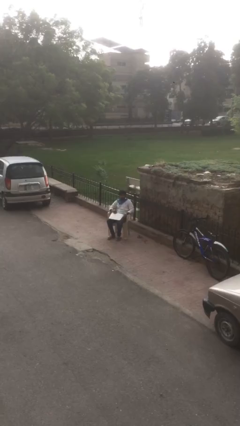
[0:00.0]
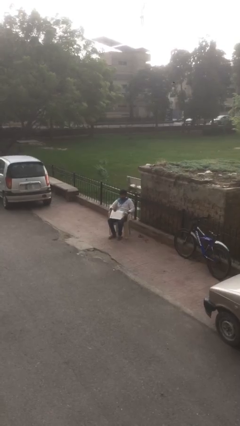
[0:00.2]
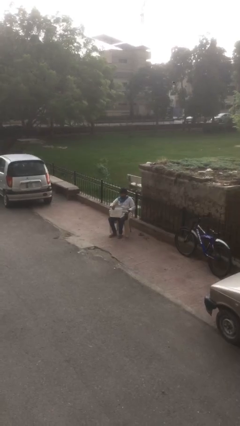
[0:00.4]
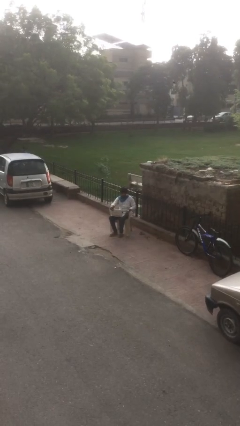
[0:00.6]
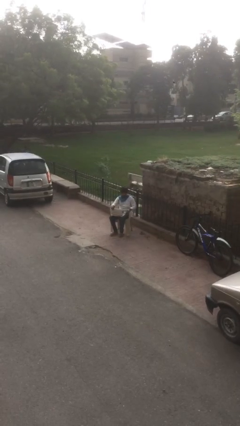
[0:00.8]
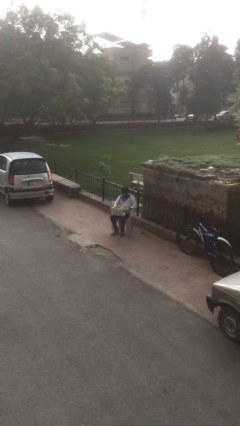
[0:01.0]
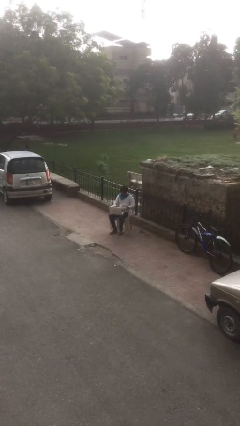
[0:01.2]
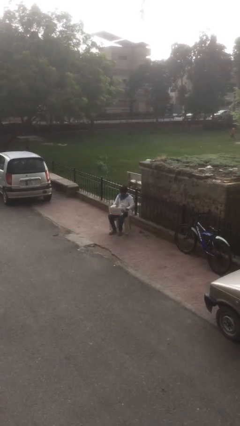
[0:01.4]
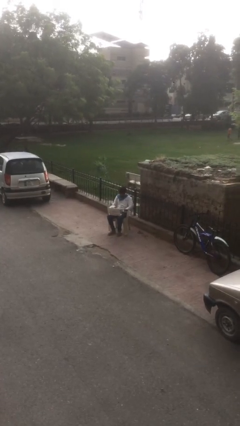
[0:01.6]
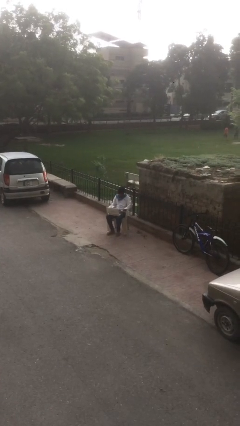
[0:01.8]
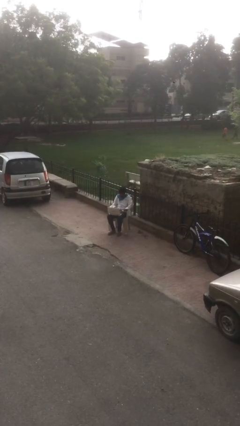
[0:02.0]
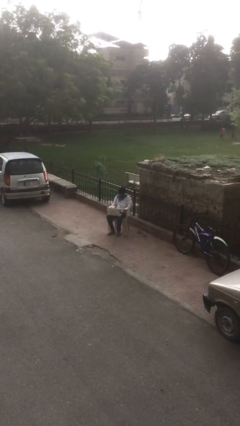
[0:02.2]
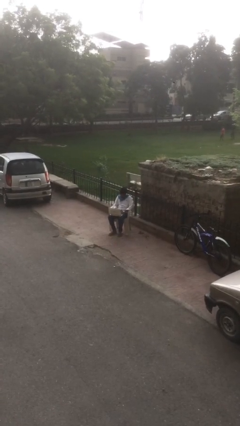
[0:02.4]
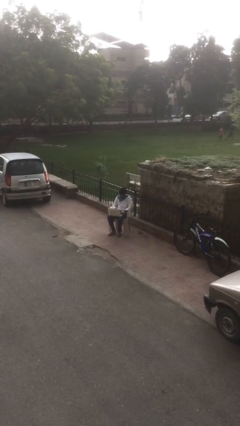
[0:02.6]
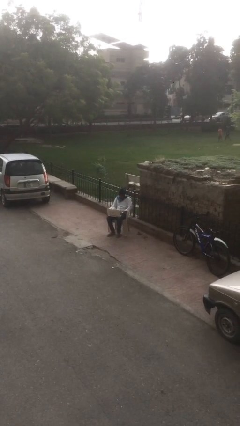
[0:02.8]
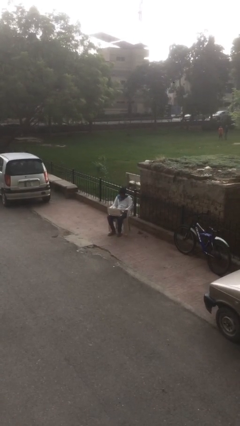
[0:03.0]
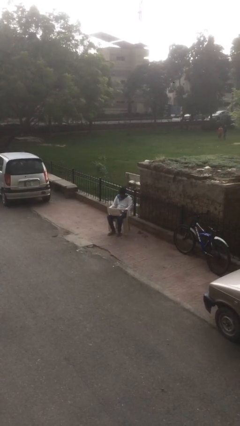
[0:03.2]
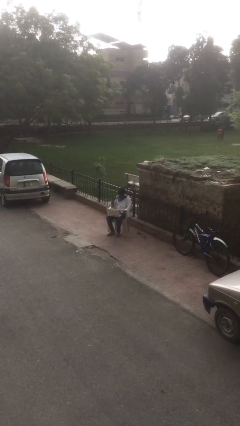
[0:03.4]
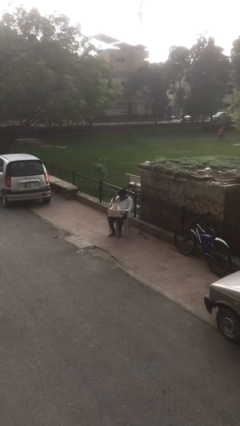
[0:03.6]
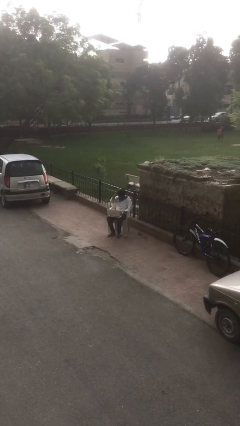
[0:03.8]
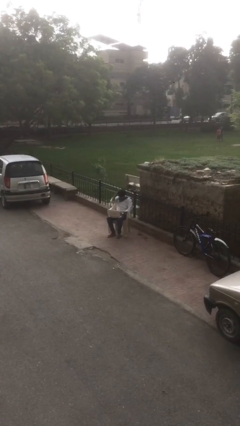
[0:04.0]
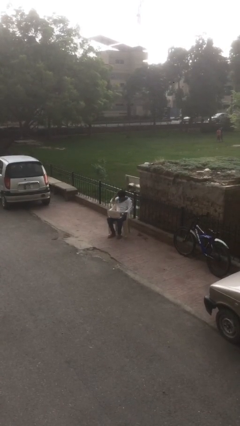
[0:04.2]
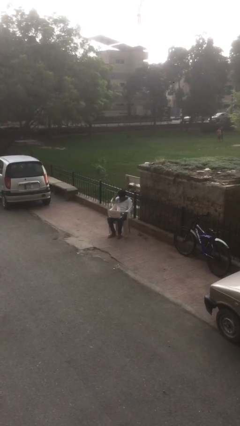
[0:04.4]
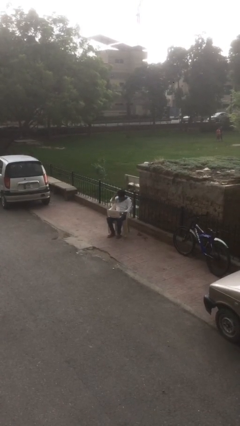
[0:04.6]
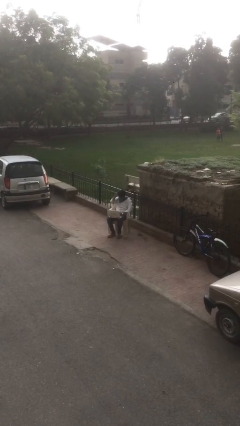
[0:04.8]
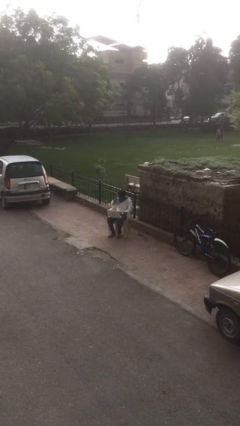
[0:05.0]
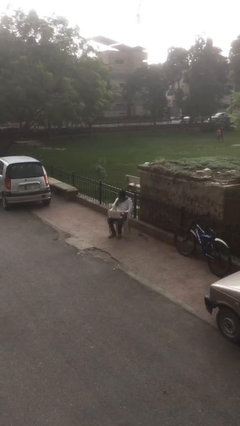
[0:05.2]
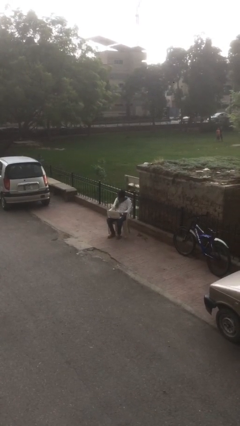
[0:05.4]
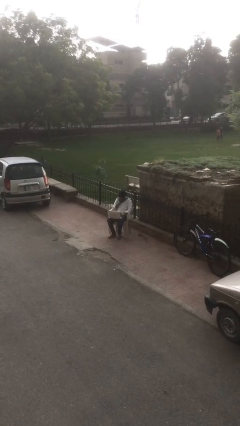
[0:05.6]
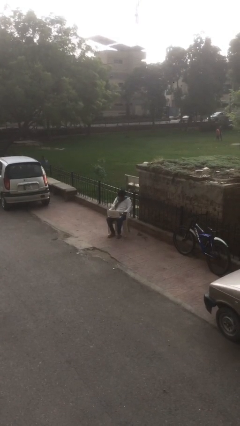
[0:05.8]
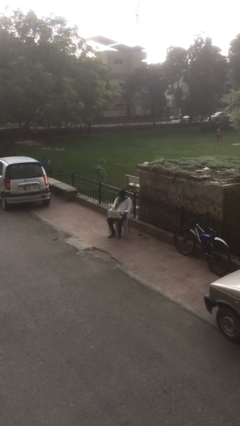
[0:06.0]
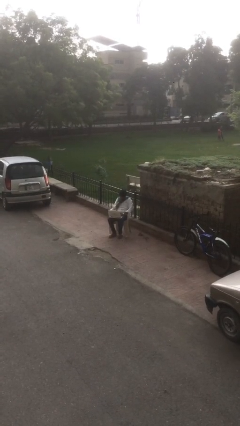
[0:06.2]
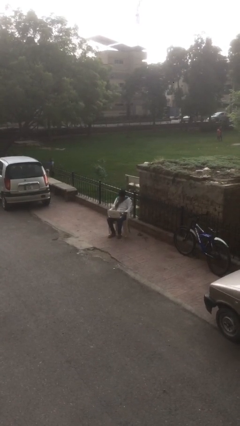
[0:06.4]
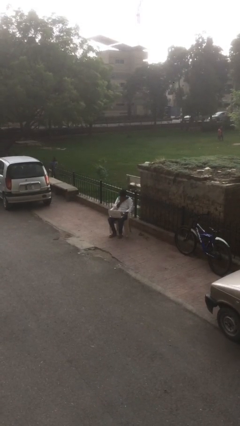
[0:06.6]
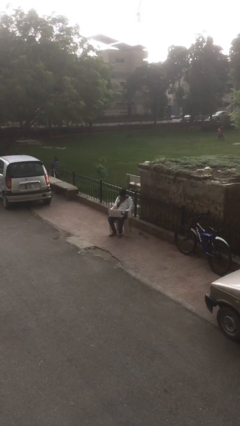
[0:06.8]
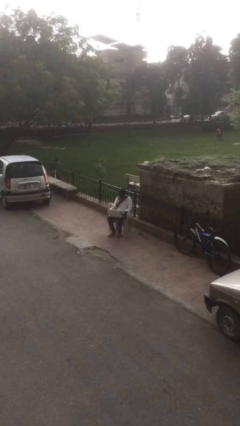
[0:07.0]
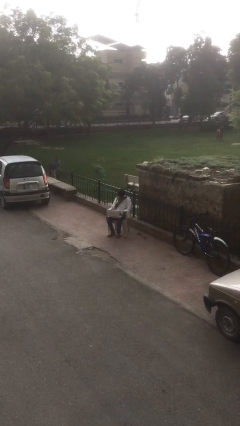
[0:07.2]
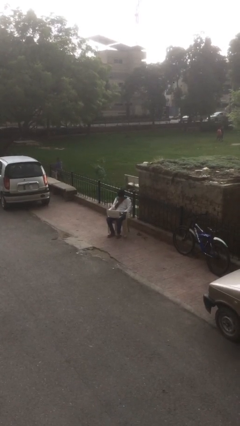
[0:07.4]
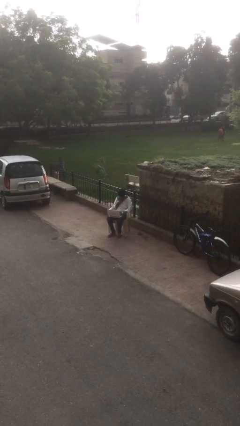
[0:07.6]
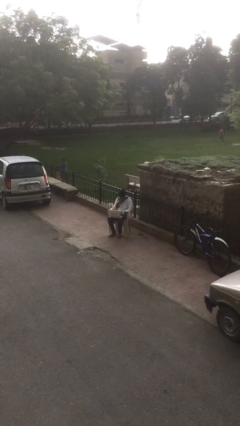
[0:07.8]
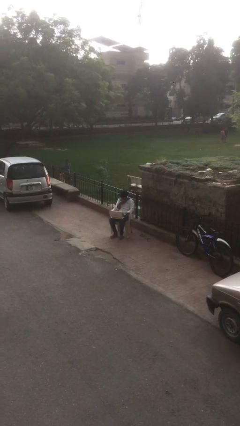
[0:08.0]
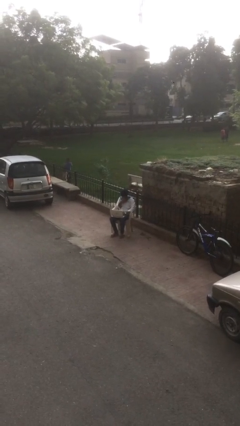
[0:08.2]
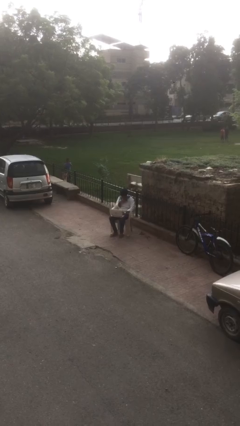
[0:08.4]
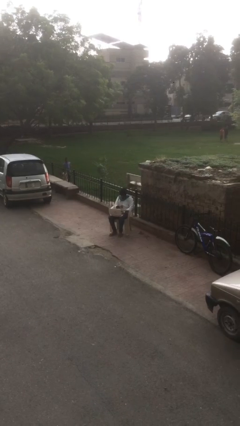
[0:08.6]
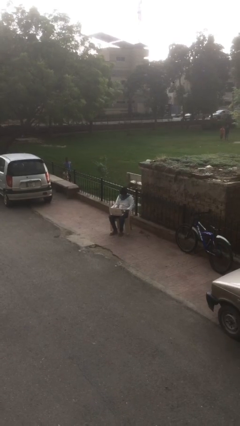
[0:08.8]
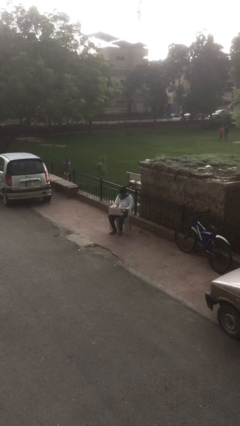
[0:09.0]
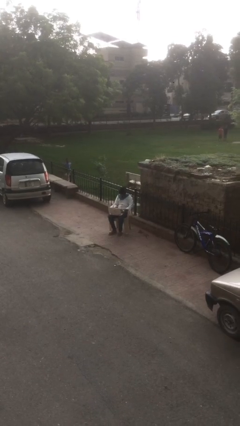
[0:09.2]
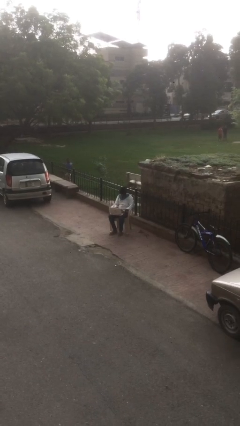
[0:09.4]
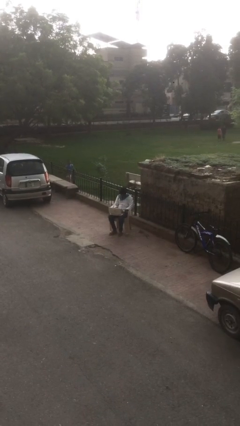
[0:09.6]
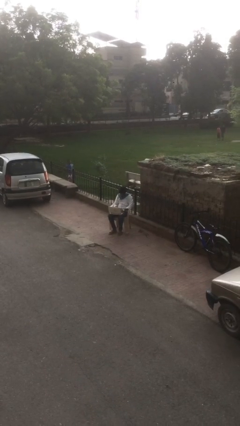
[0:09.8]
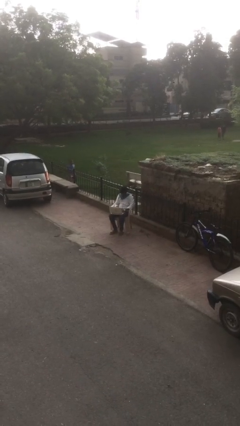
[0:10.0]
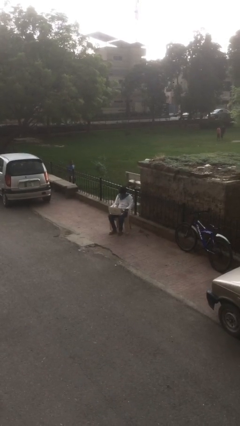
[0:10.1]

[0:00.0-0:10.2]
person interacts with laptop

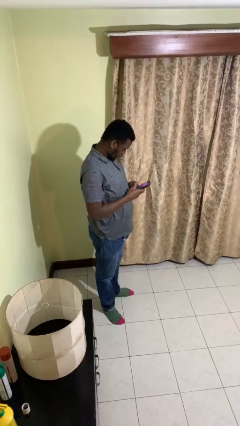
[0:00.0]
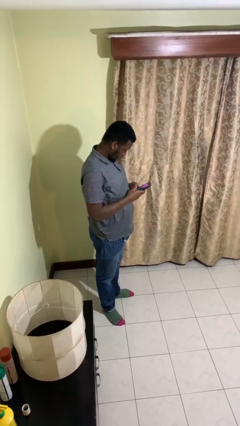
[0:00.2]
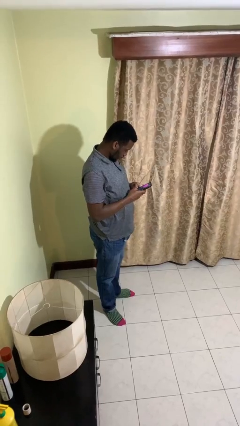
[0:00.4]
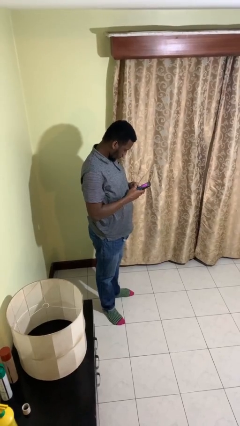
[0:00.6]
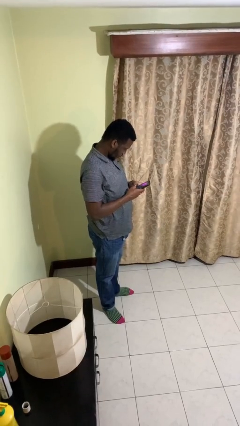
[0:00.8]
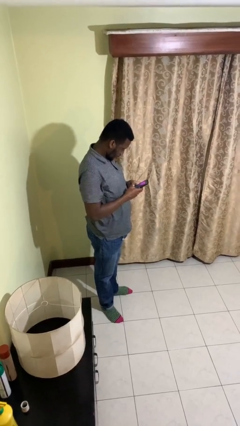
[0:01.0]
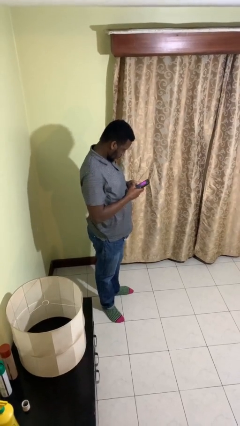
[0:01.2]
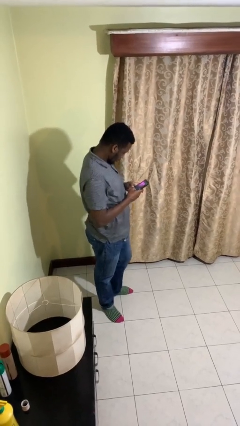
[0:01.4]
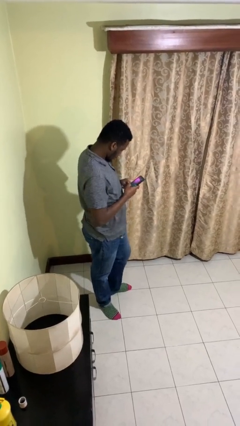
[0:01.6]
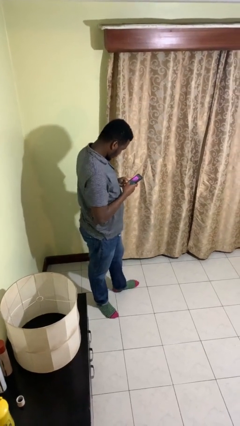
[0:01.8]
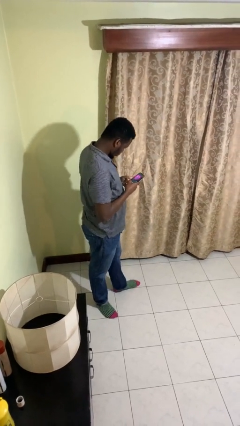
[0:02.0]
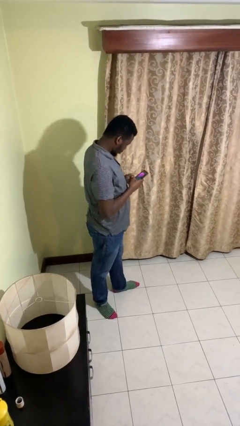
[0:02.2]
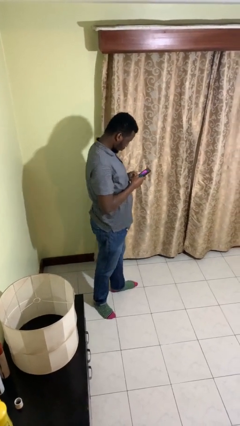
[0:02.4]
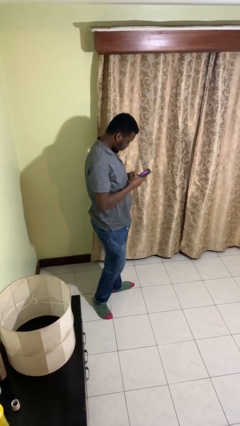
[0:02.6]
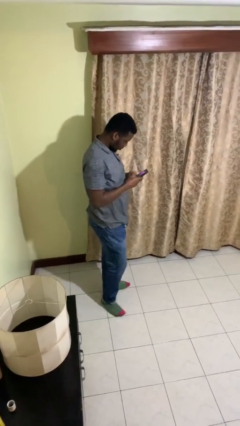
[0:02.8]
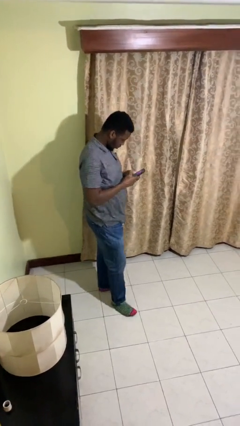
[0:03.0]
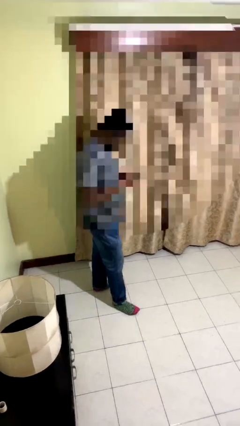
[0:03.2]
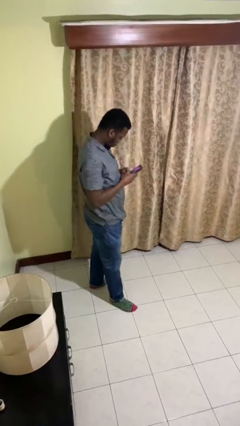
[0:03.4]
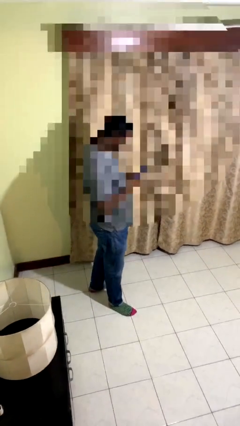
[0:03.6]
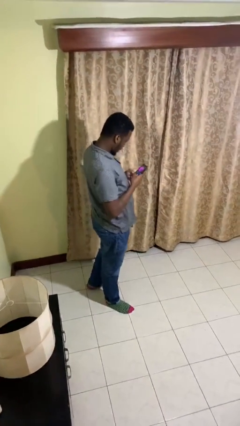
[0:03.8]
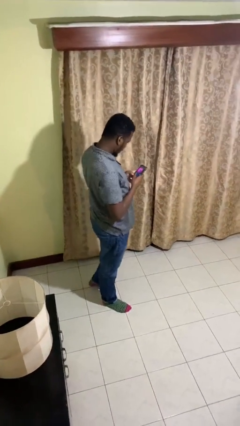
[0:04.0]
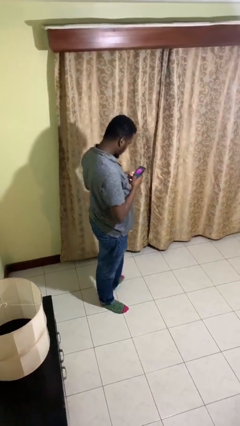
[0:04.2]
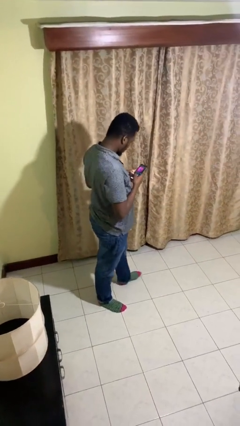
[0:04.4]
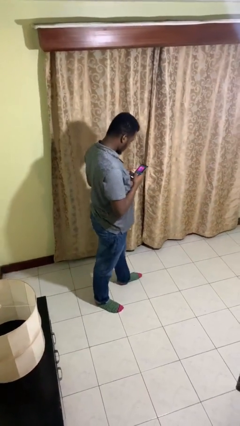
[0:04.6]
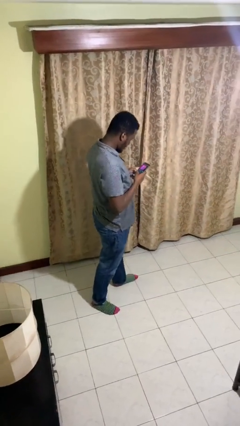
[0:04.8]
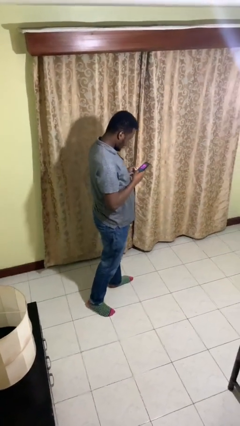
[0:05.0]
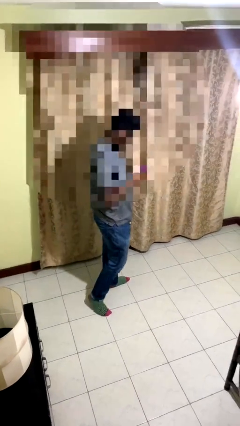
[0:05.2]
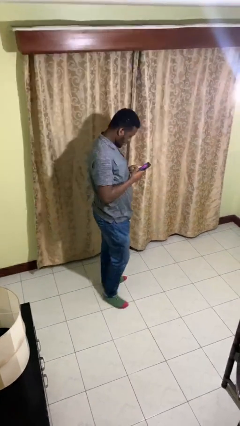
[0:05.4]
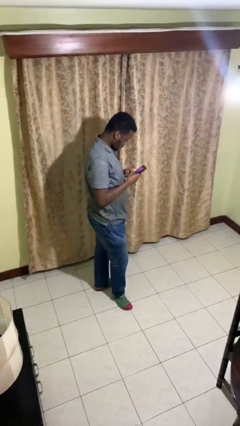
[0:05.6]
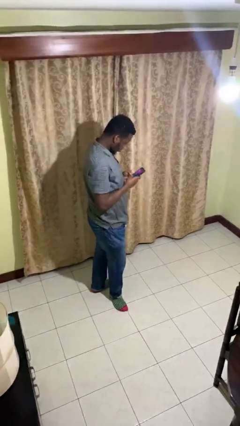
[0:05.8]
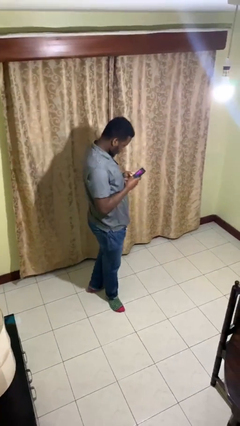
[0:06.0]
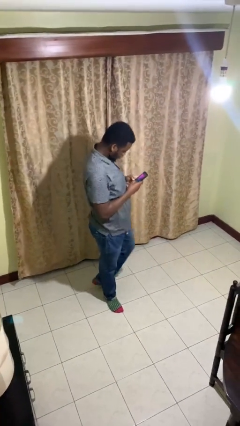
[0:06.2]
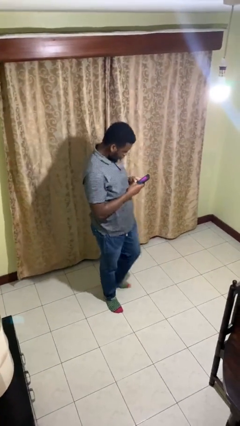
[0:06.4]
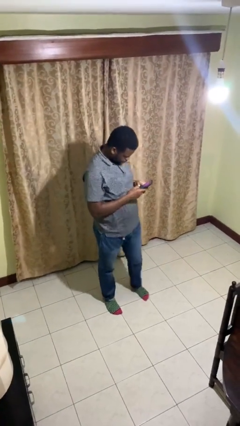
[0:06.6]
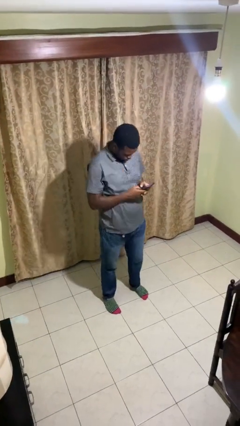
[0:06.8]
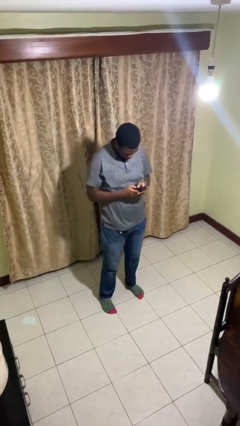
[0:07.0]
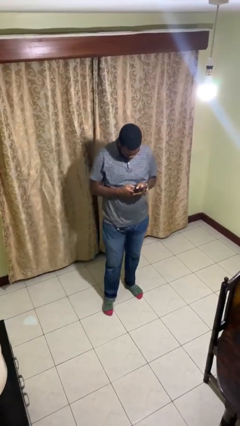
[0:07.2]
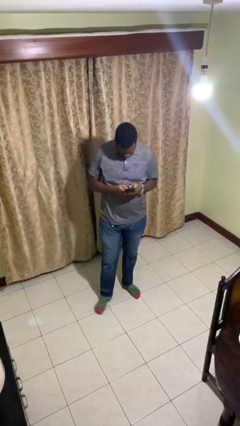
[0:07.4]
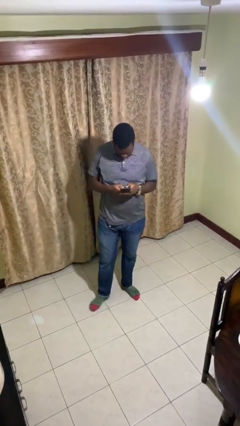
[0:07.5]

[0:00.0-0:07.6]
person texts on phone

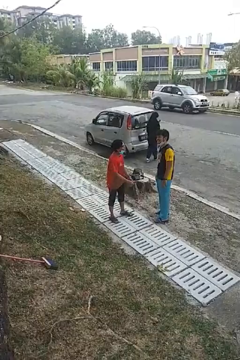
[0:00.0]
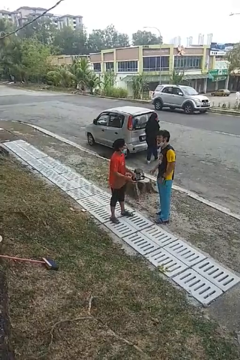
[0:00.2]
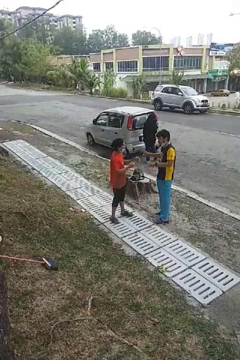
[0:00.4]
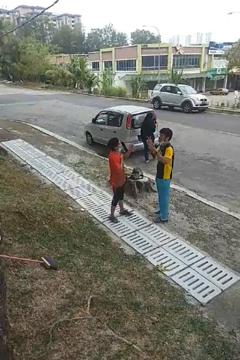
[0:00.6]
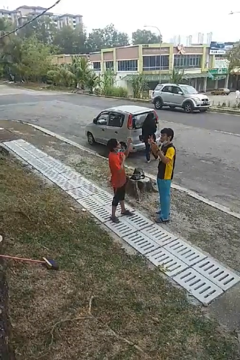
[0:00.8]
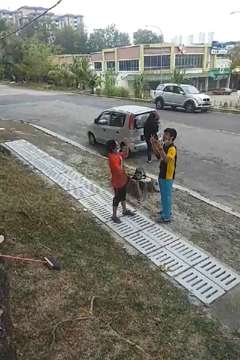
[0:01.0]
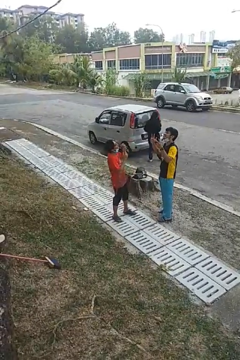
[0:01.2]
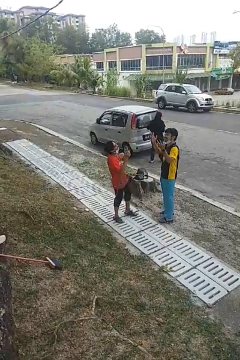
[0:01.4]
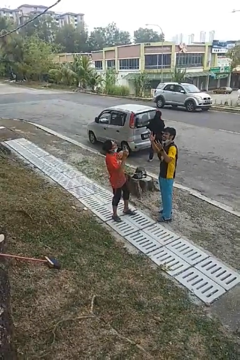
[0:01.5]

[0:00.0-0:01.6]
person laughs with person
